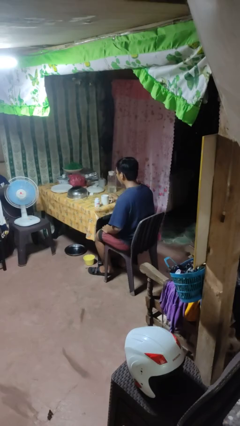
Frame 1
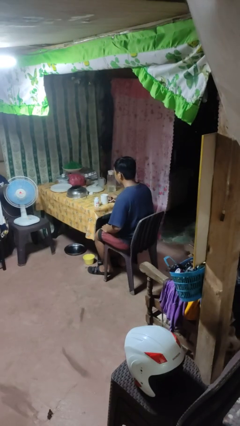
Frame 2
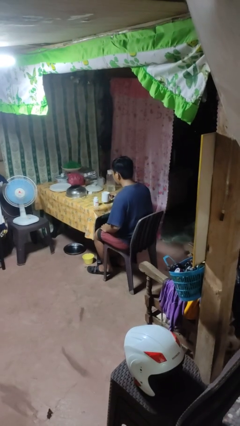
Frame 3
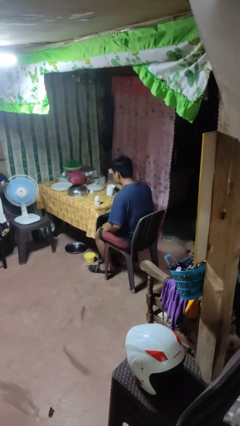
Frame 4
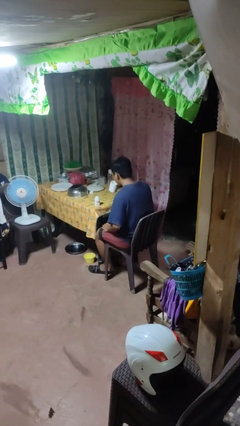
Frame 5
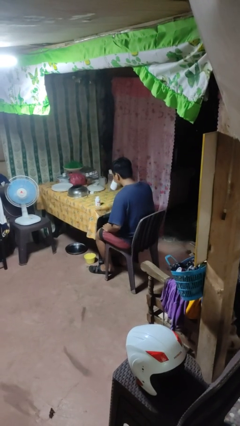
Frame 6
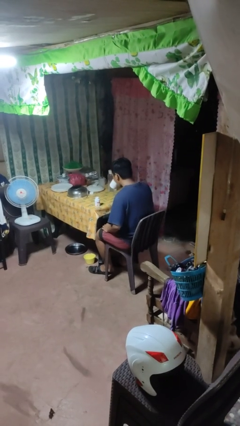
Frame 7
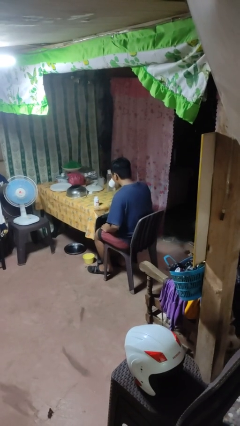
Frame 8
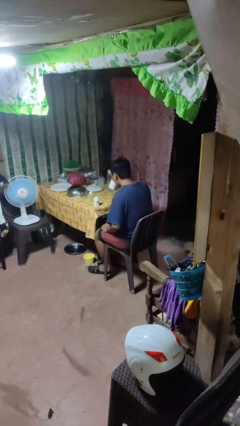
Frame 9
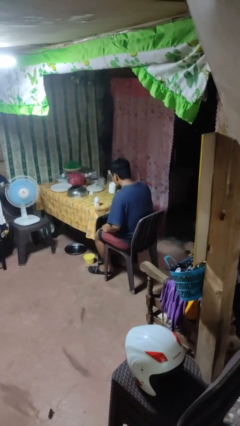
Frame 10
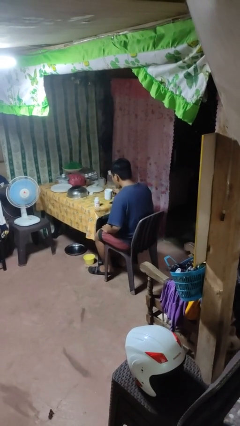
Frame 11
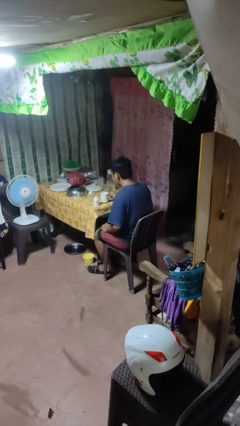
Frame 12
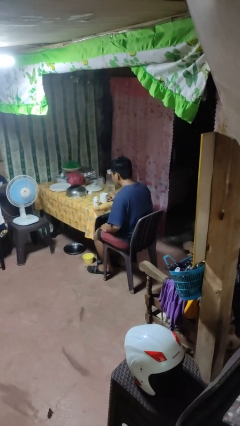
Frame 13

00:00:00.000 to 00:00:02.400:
person drinks from cup

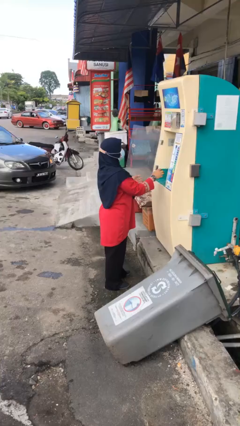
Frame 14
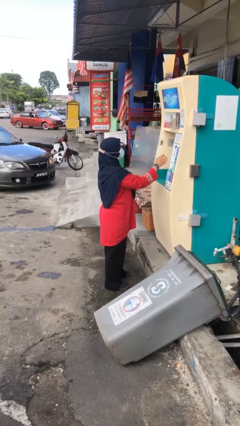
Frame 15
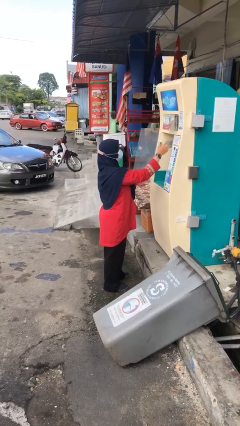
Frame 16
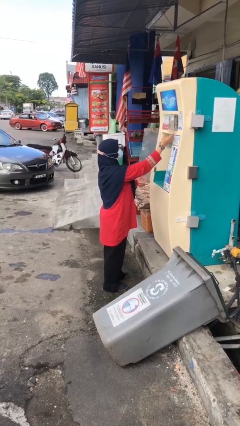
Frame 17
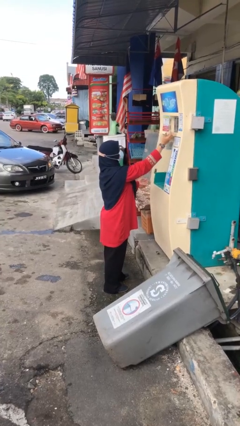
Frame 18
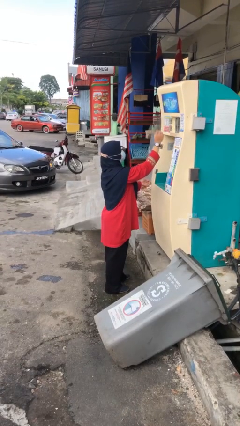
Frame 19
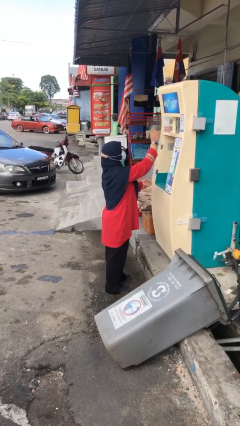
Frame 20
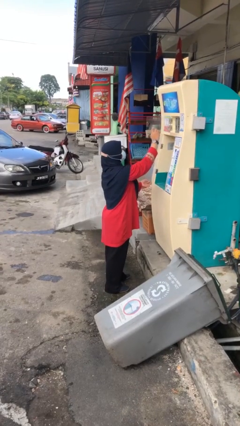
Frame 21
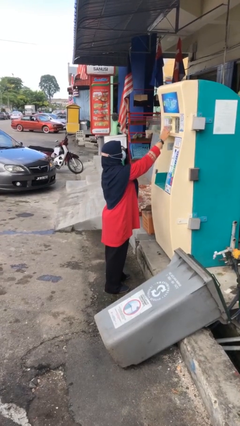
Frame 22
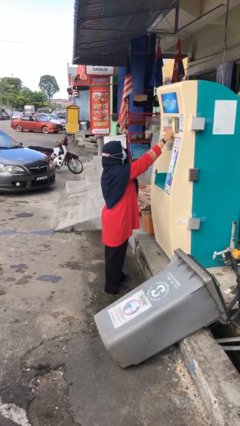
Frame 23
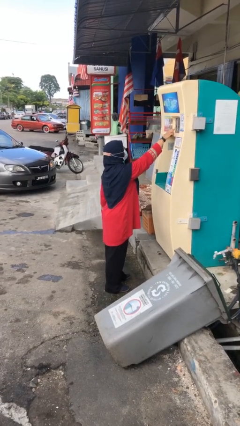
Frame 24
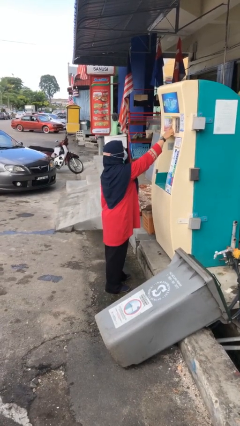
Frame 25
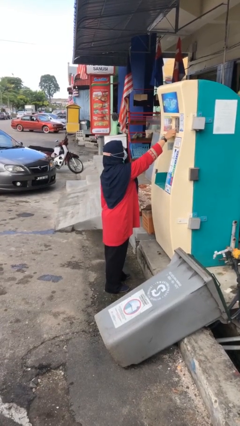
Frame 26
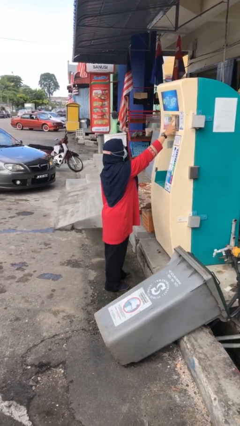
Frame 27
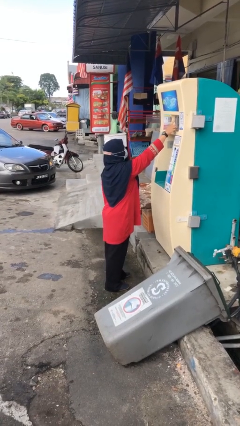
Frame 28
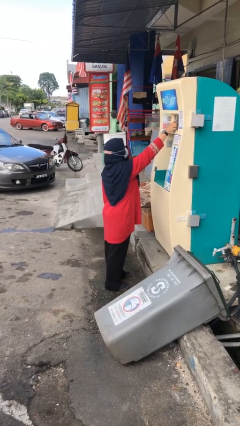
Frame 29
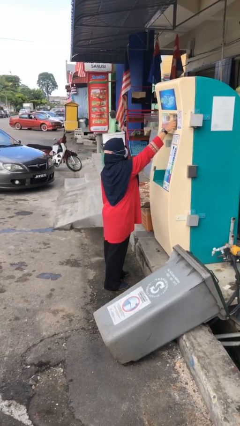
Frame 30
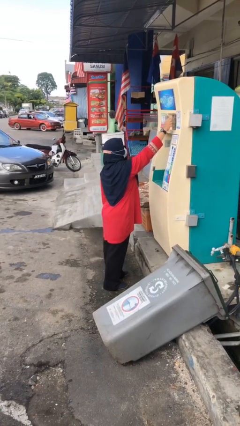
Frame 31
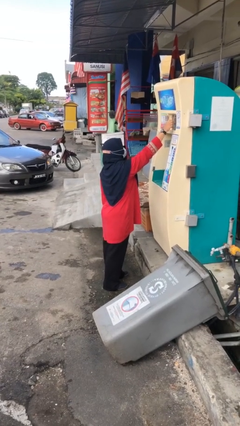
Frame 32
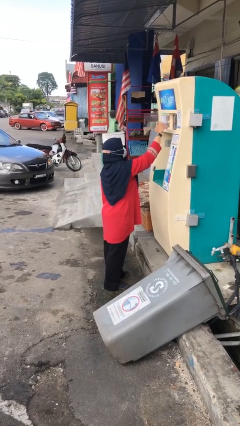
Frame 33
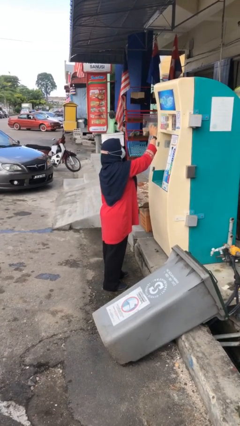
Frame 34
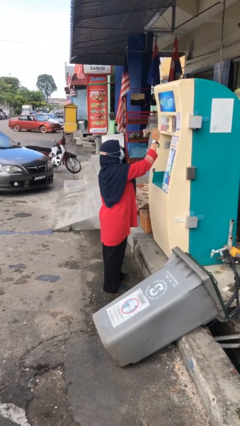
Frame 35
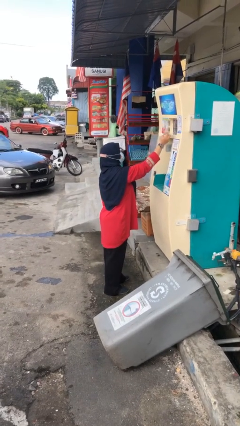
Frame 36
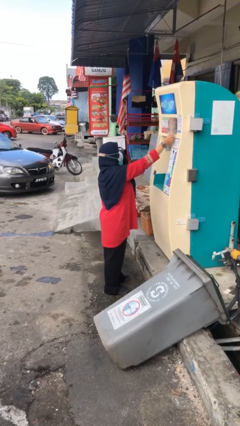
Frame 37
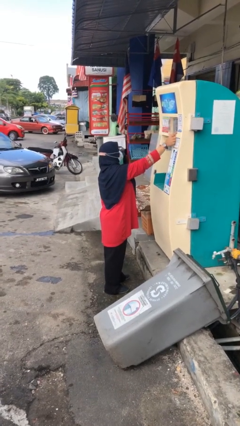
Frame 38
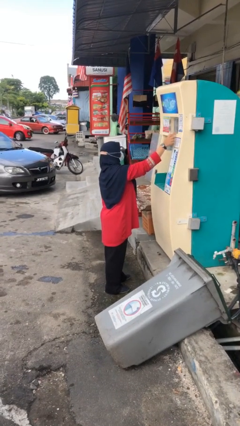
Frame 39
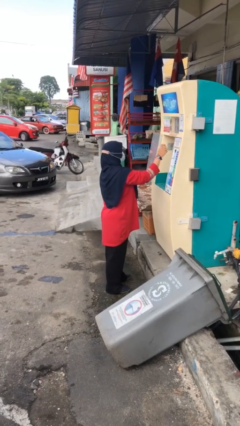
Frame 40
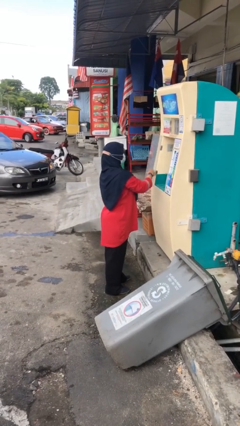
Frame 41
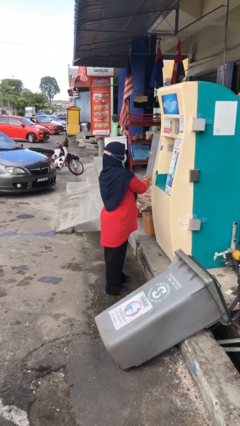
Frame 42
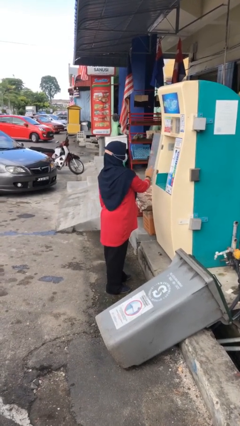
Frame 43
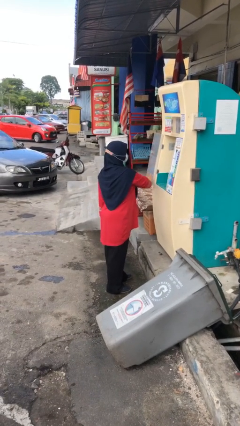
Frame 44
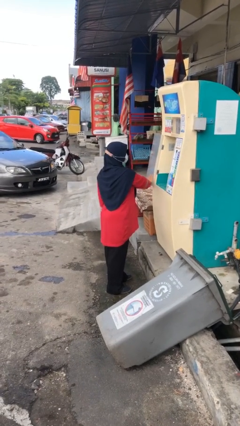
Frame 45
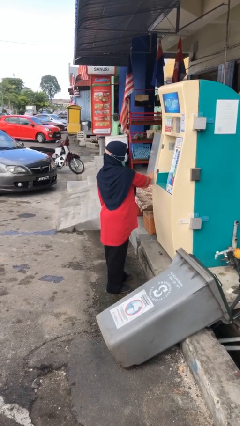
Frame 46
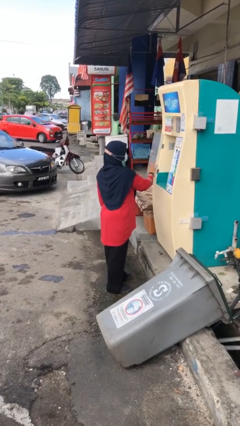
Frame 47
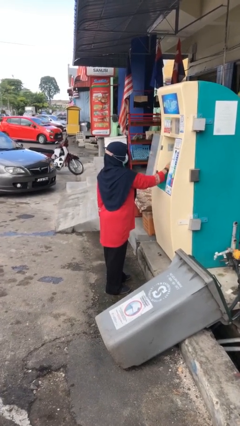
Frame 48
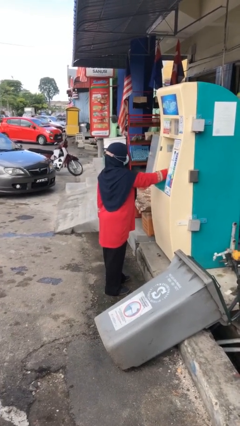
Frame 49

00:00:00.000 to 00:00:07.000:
person purchases from machine

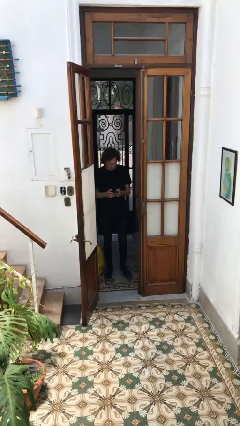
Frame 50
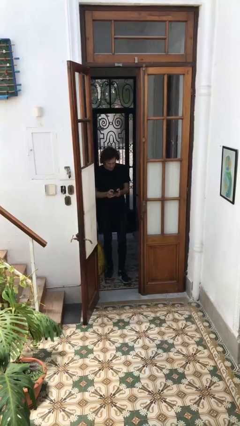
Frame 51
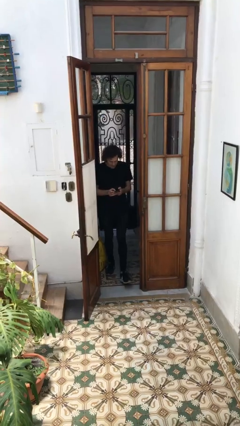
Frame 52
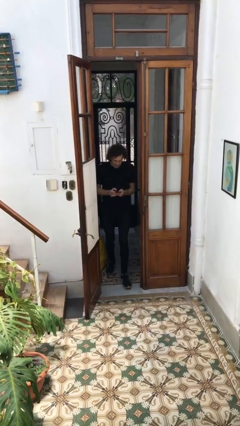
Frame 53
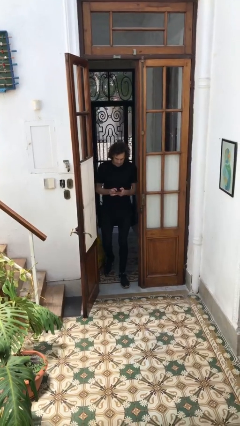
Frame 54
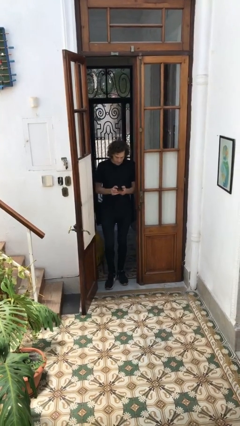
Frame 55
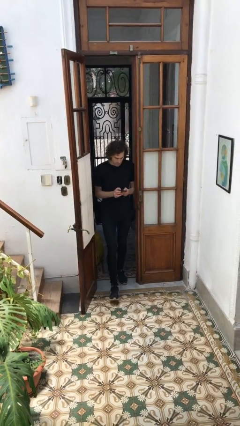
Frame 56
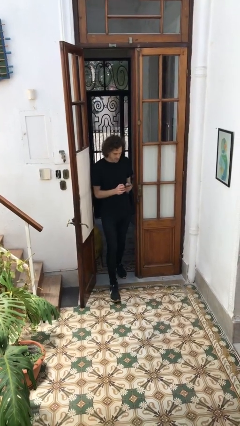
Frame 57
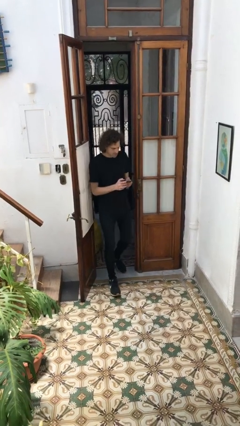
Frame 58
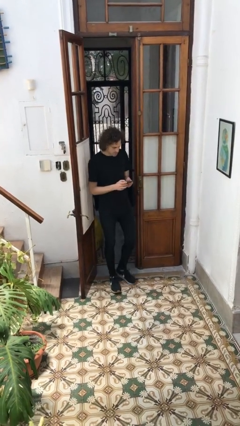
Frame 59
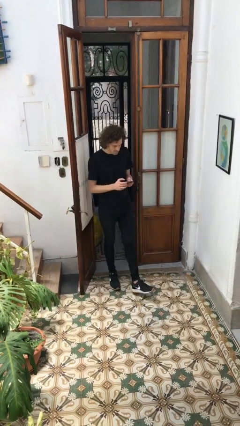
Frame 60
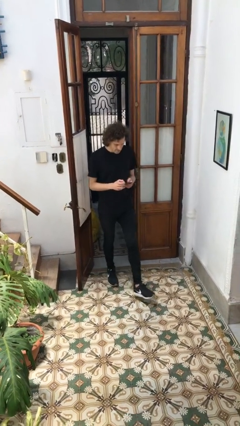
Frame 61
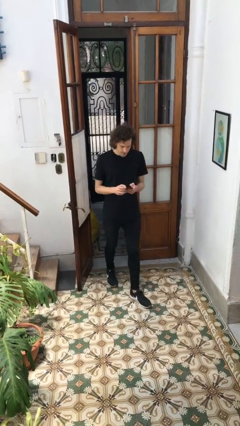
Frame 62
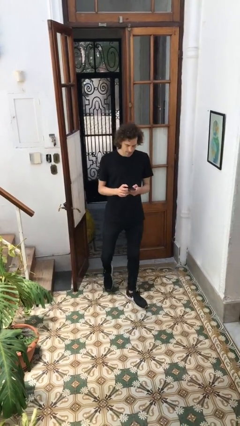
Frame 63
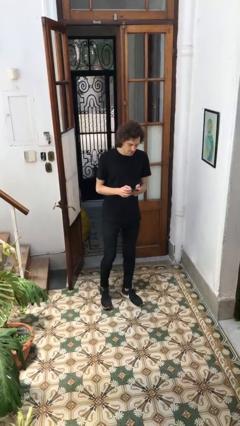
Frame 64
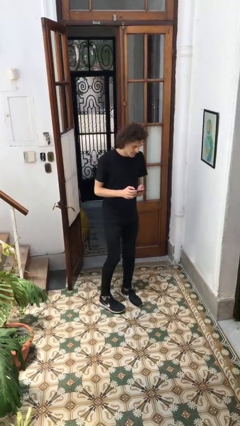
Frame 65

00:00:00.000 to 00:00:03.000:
person enters scene through structure

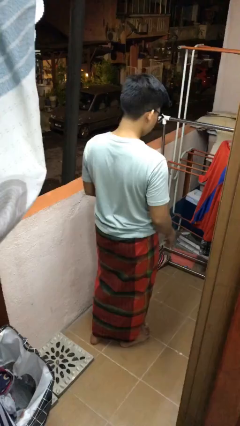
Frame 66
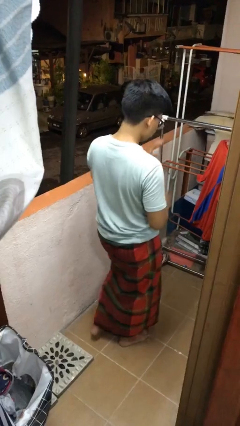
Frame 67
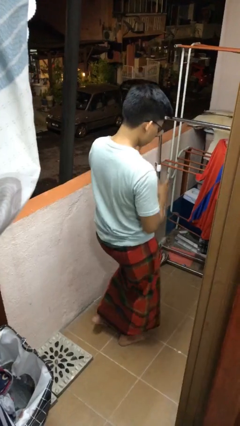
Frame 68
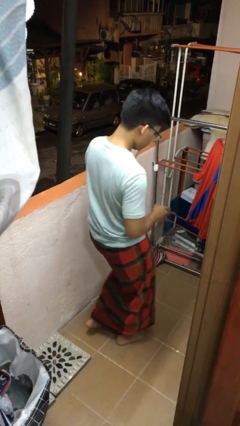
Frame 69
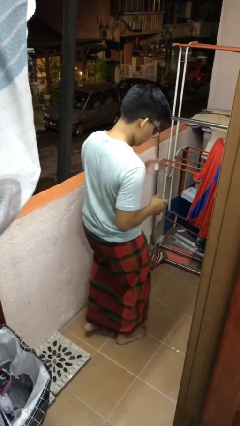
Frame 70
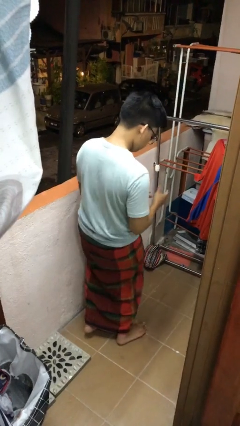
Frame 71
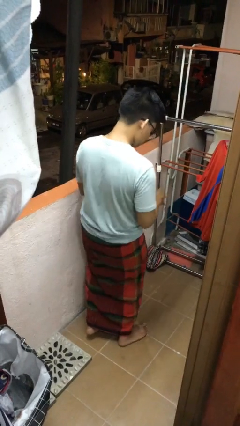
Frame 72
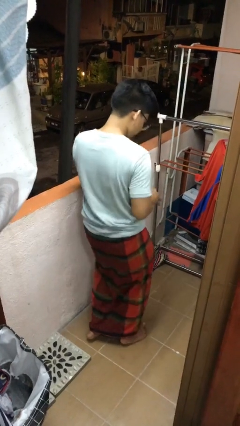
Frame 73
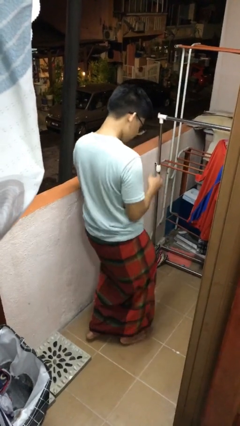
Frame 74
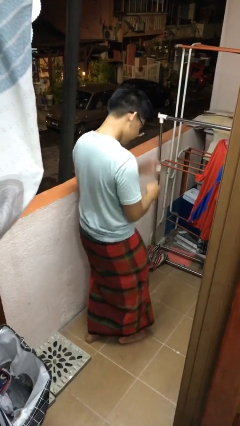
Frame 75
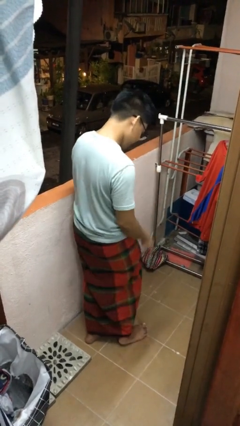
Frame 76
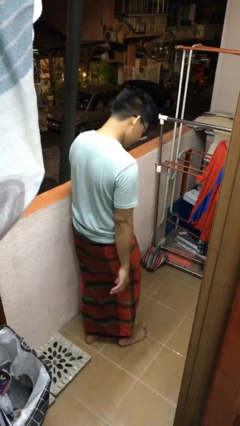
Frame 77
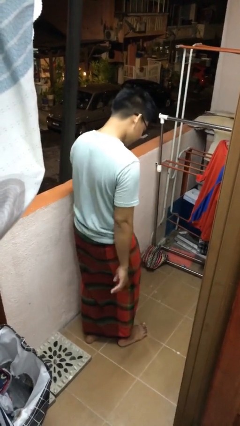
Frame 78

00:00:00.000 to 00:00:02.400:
person dances in place

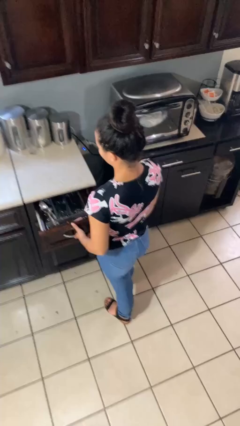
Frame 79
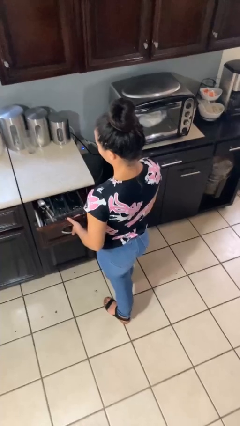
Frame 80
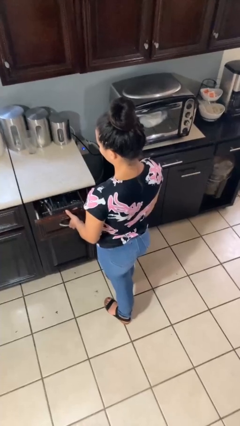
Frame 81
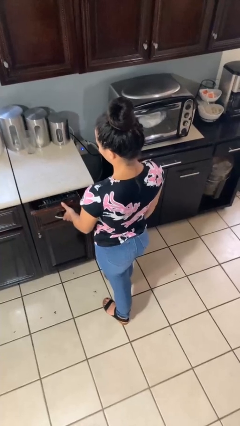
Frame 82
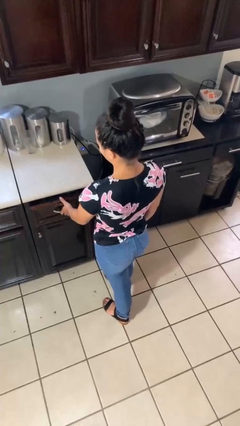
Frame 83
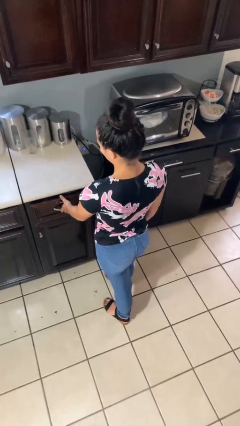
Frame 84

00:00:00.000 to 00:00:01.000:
person closes kitchen drawer

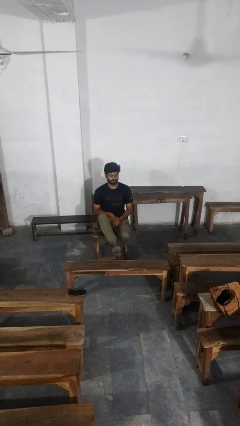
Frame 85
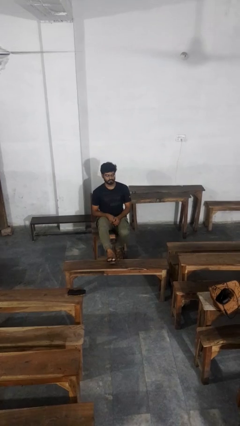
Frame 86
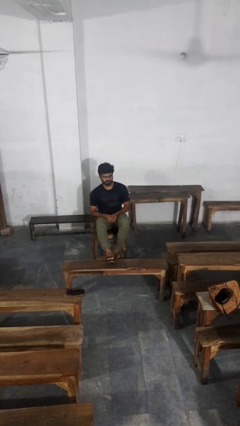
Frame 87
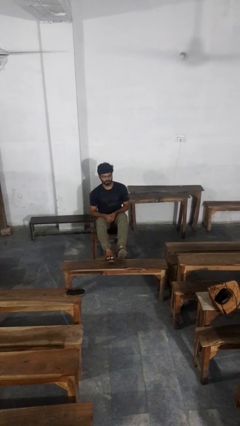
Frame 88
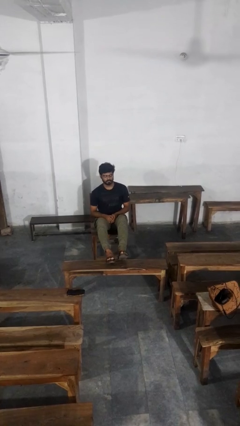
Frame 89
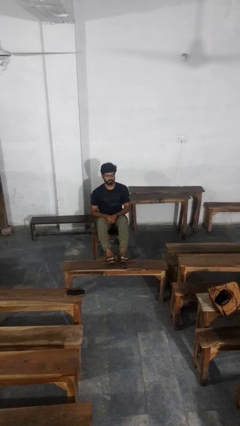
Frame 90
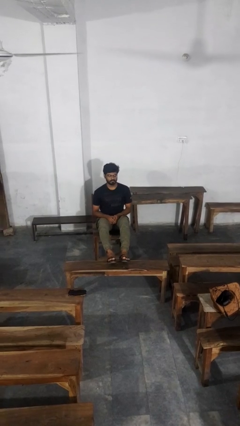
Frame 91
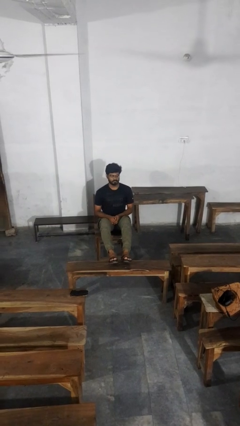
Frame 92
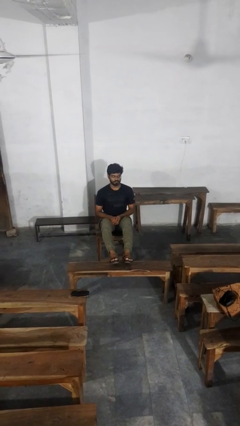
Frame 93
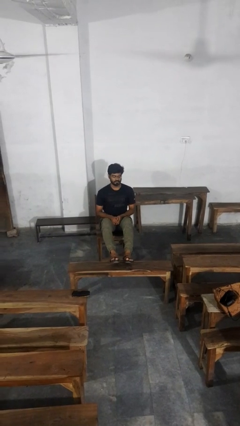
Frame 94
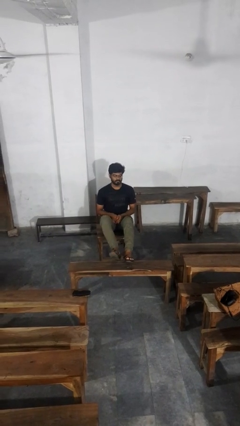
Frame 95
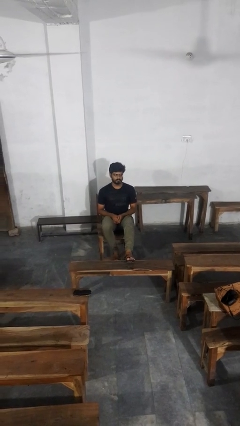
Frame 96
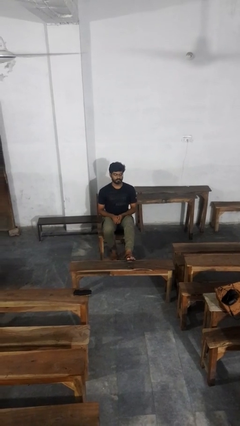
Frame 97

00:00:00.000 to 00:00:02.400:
person puts feet up
